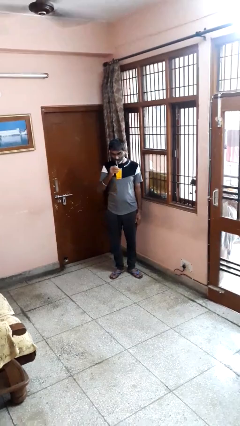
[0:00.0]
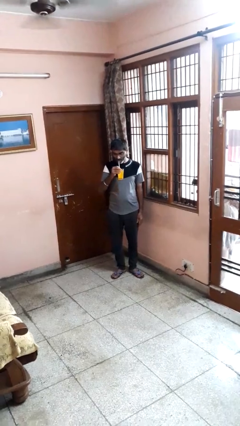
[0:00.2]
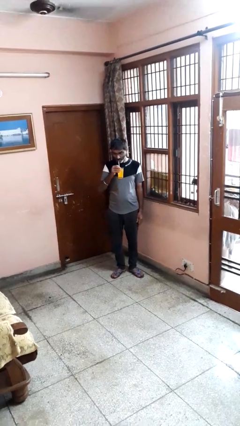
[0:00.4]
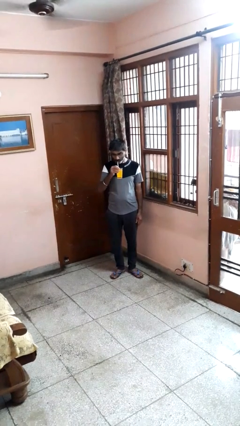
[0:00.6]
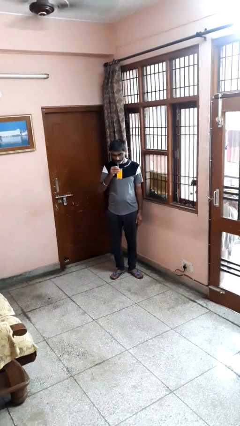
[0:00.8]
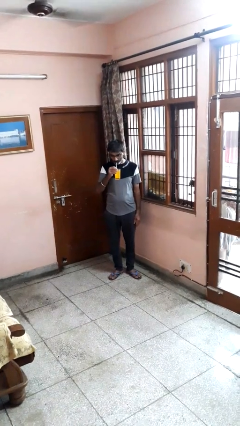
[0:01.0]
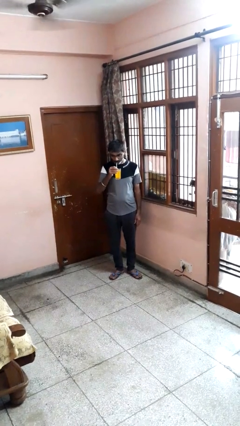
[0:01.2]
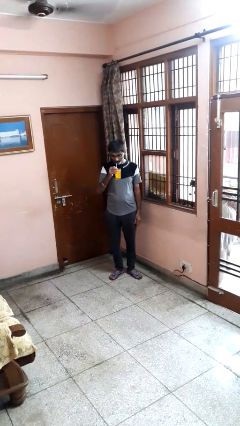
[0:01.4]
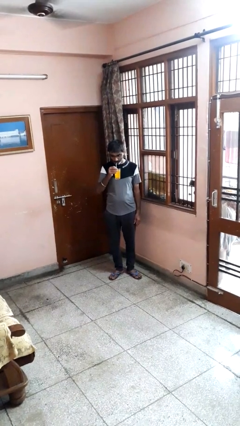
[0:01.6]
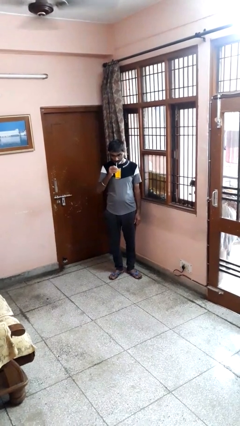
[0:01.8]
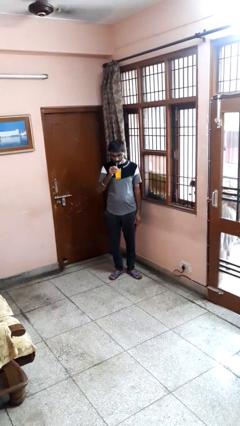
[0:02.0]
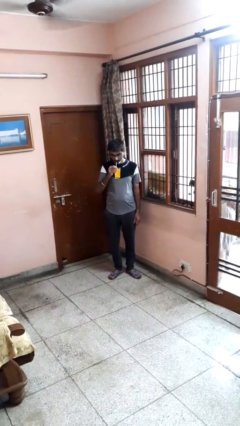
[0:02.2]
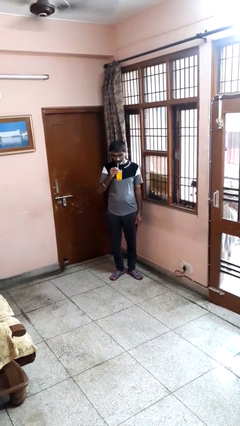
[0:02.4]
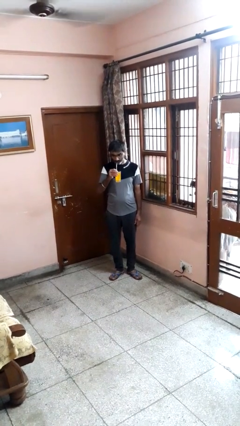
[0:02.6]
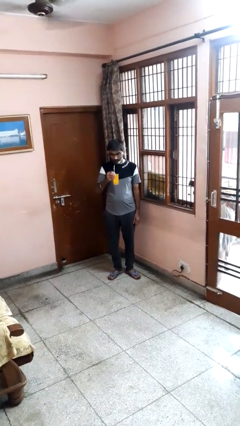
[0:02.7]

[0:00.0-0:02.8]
person drinks from straw

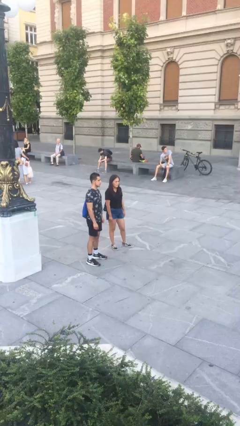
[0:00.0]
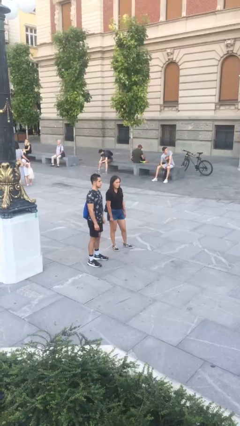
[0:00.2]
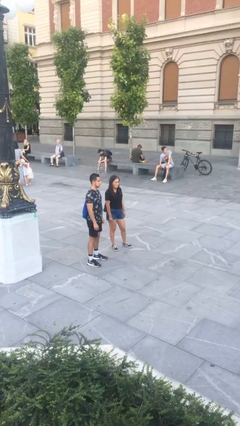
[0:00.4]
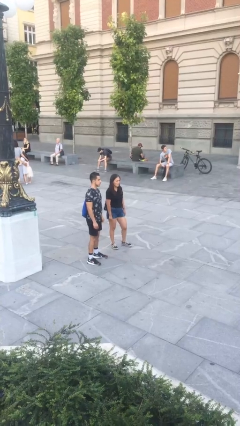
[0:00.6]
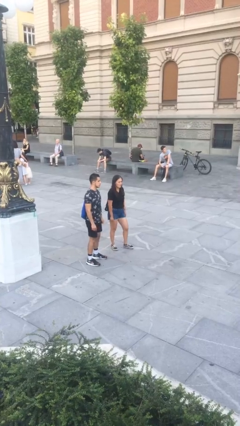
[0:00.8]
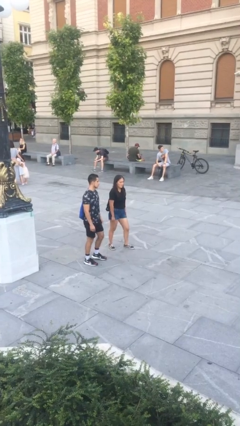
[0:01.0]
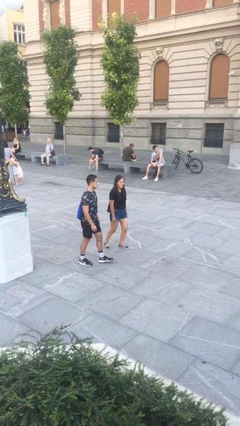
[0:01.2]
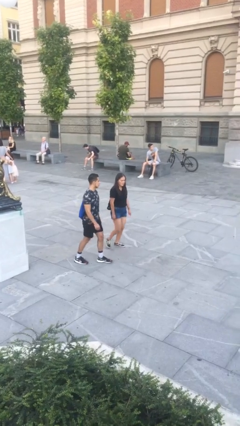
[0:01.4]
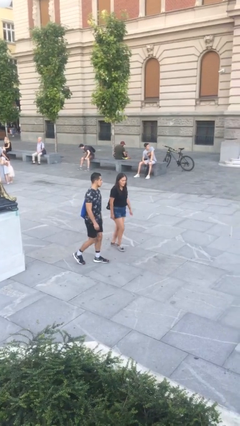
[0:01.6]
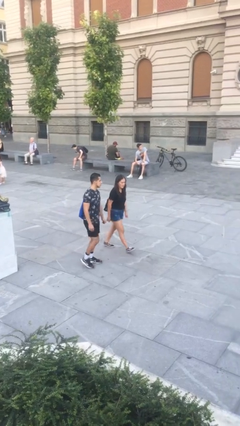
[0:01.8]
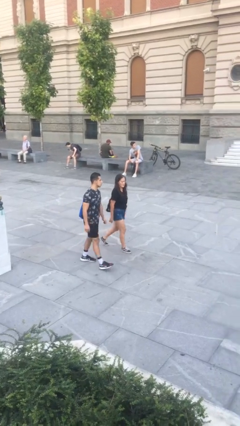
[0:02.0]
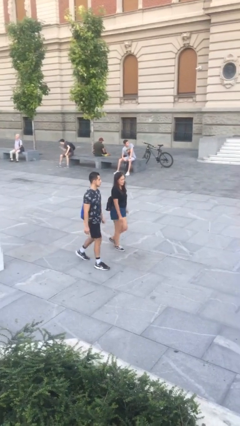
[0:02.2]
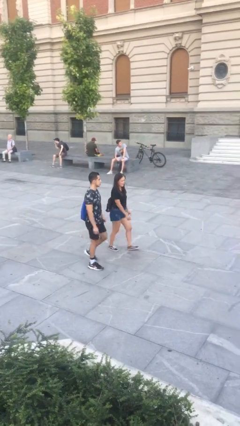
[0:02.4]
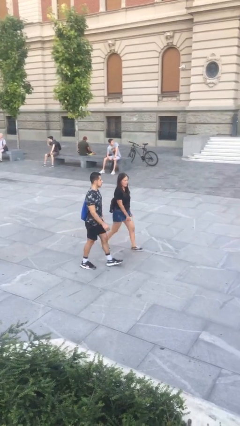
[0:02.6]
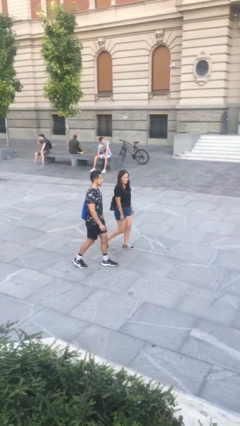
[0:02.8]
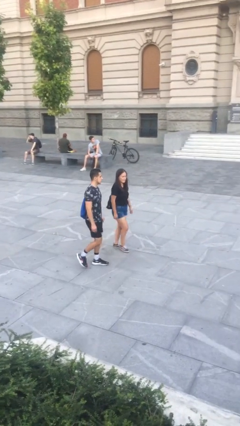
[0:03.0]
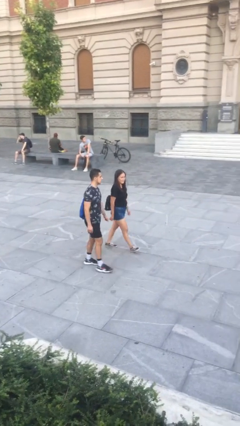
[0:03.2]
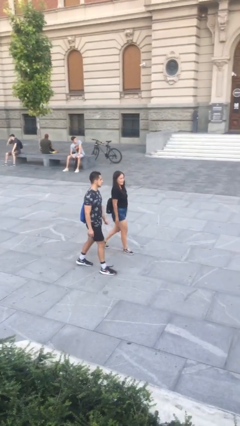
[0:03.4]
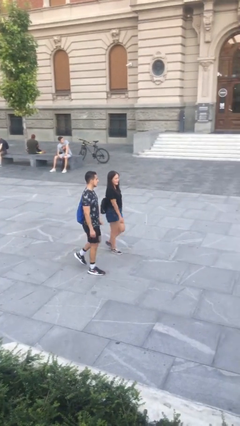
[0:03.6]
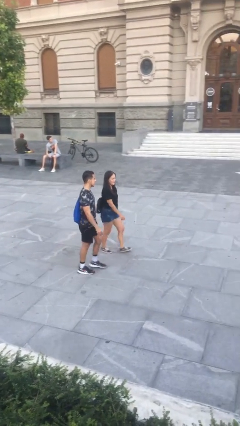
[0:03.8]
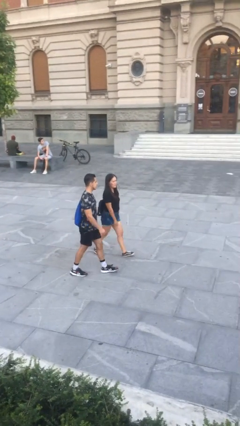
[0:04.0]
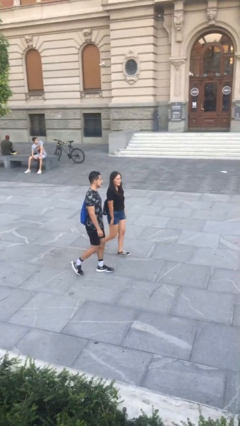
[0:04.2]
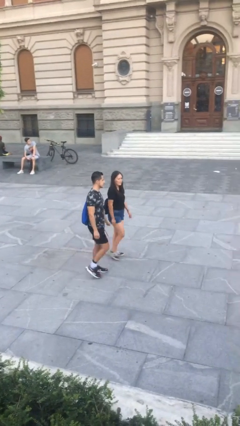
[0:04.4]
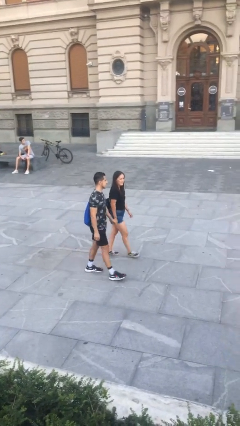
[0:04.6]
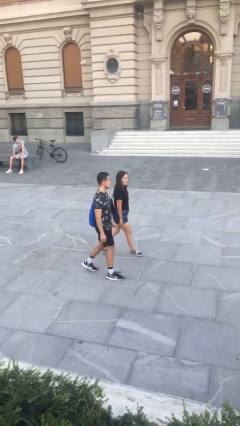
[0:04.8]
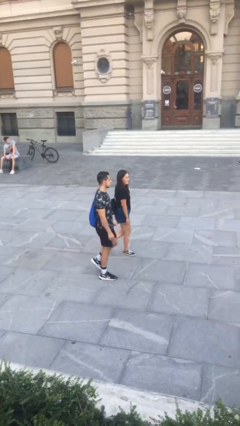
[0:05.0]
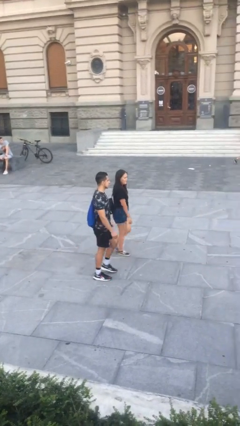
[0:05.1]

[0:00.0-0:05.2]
person talks to person

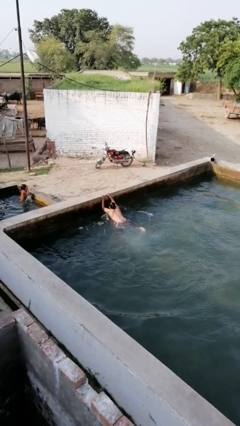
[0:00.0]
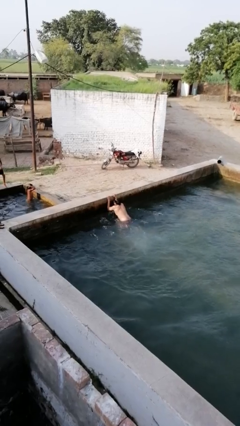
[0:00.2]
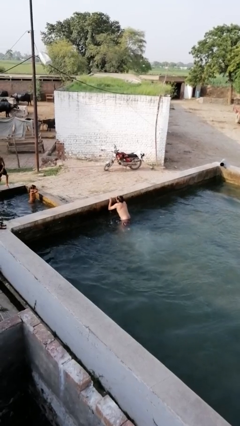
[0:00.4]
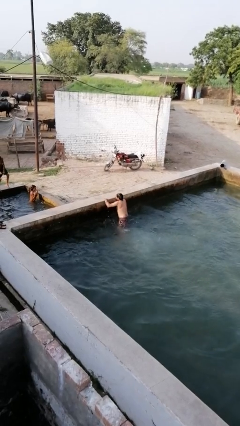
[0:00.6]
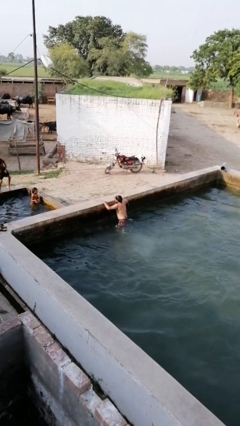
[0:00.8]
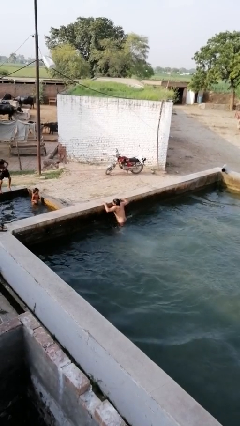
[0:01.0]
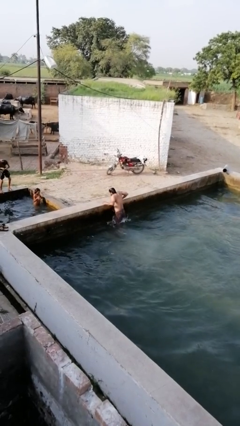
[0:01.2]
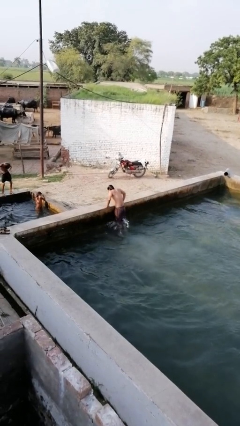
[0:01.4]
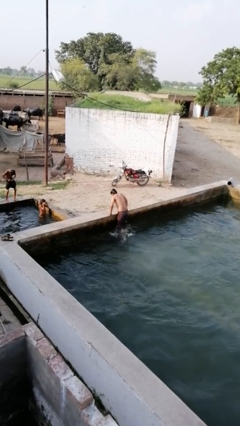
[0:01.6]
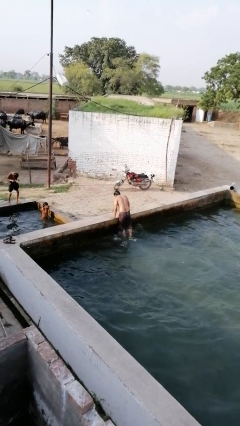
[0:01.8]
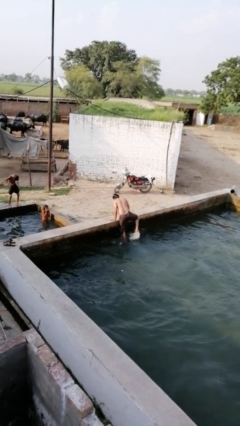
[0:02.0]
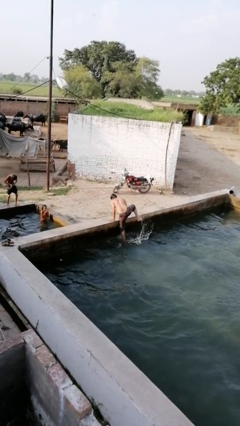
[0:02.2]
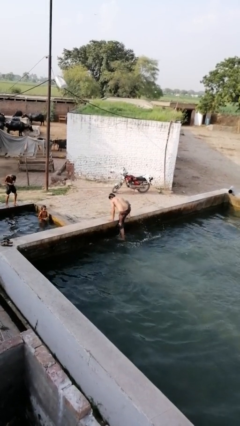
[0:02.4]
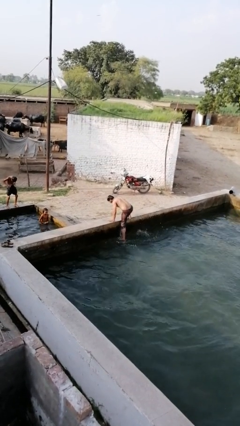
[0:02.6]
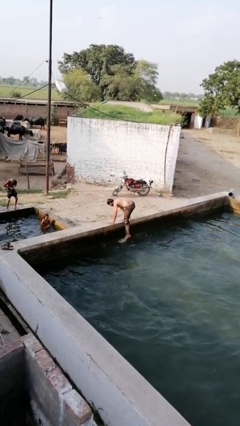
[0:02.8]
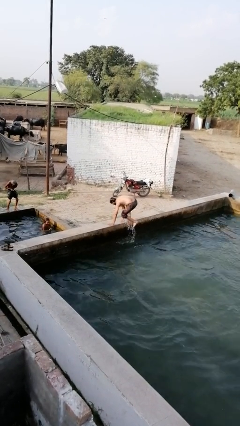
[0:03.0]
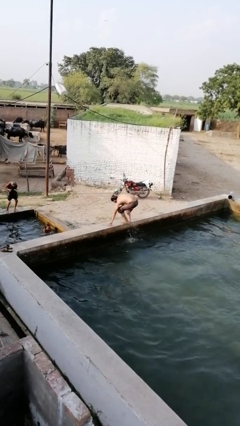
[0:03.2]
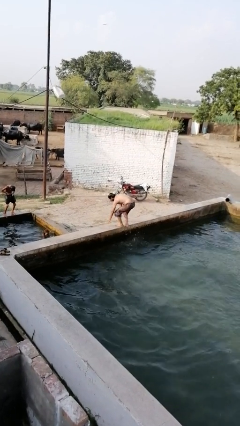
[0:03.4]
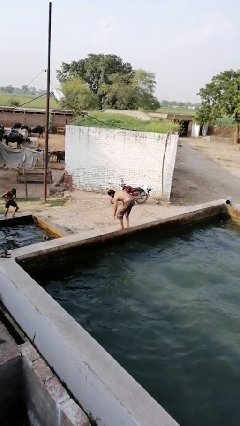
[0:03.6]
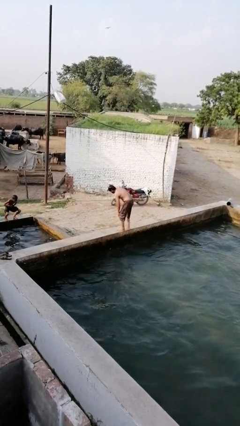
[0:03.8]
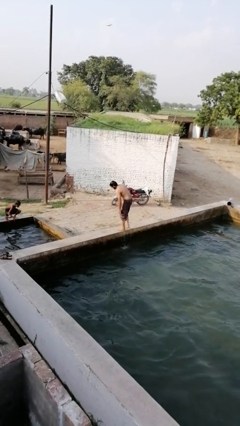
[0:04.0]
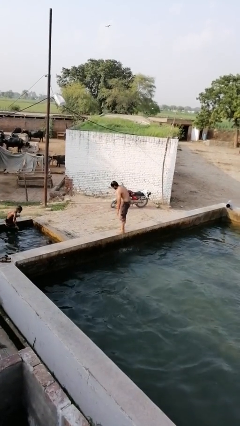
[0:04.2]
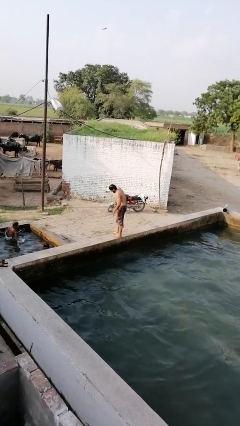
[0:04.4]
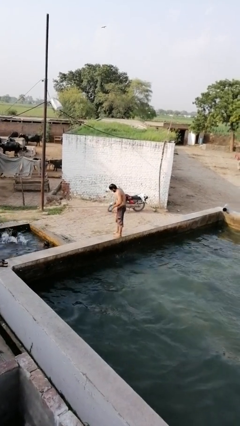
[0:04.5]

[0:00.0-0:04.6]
person exits pool

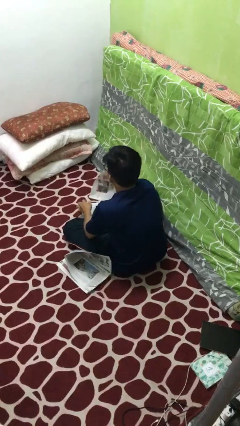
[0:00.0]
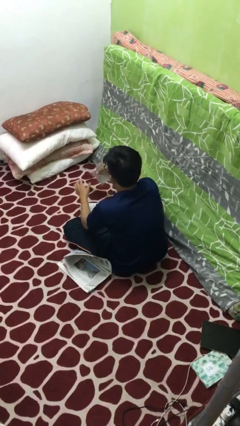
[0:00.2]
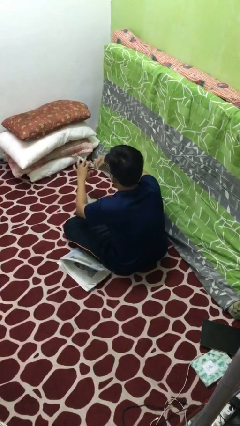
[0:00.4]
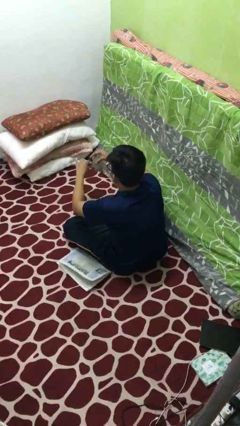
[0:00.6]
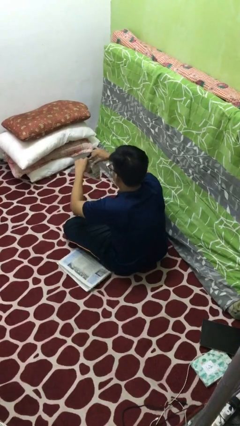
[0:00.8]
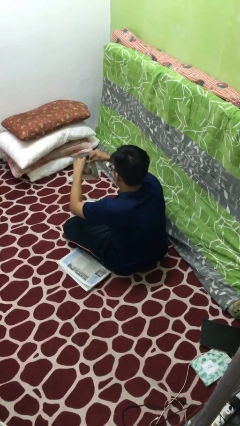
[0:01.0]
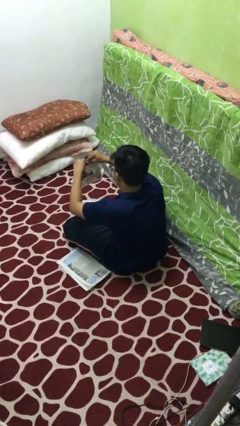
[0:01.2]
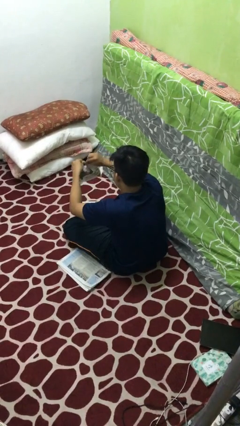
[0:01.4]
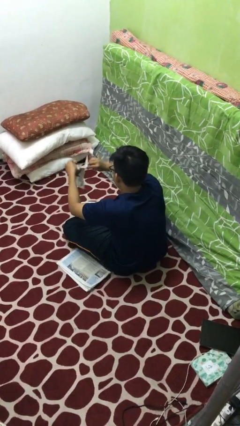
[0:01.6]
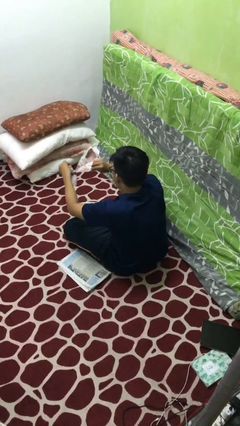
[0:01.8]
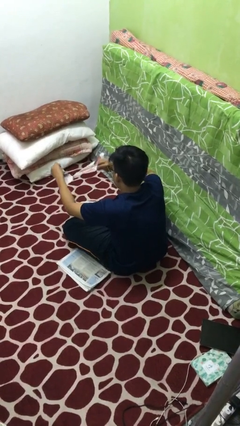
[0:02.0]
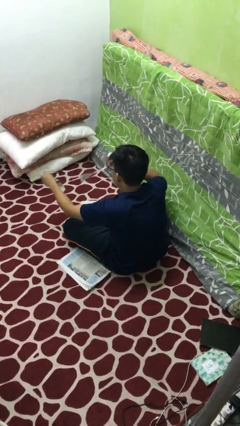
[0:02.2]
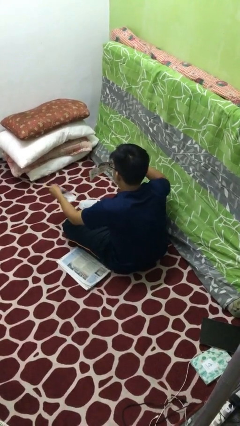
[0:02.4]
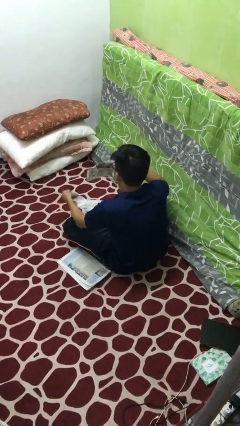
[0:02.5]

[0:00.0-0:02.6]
person tears paper

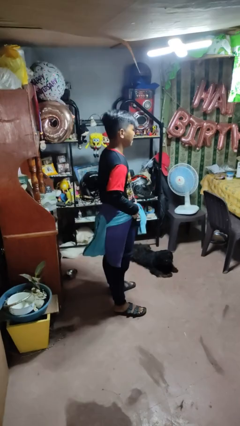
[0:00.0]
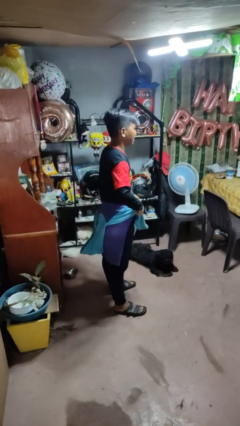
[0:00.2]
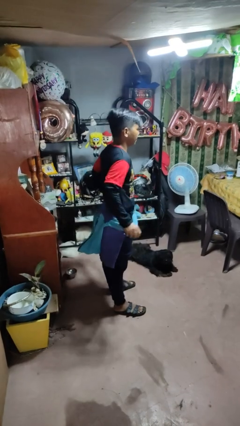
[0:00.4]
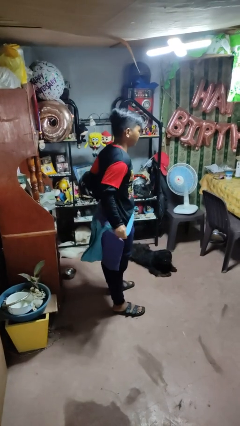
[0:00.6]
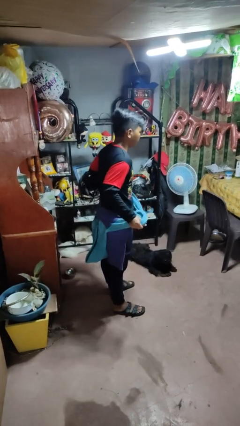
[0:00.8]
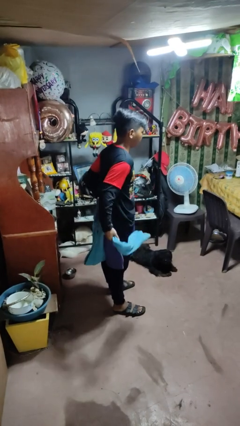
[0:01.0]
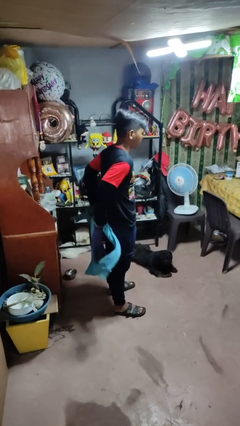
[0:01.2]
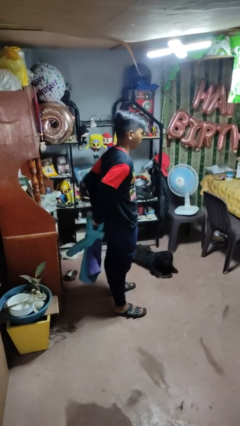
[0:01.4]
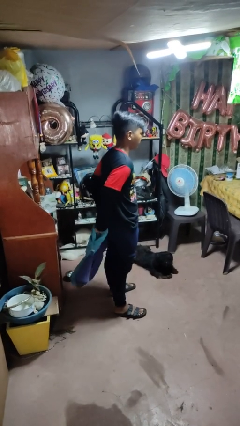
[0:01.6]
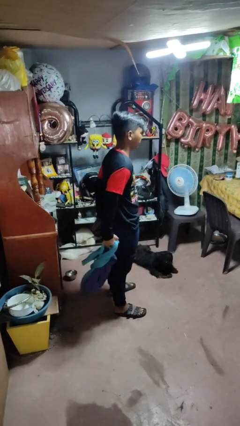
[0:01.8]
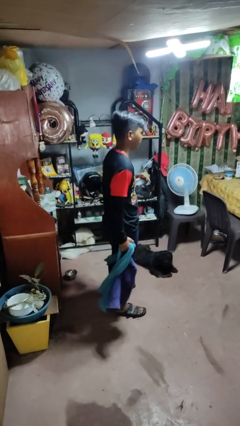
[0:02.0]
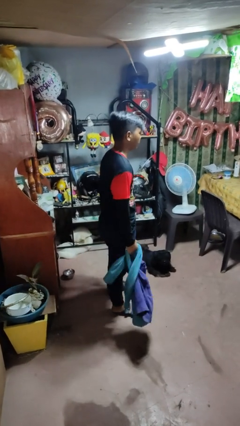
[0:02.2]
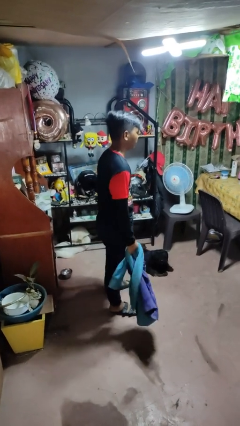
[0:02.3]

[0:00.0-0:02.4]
person unties jacket around waist

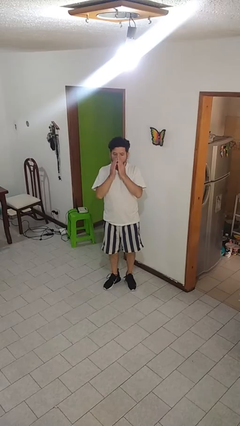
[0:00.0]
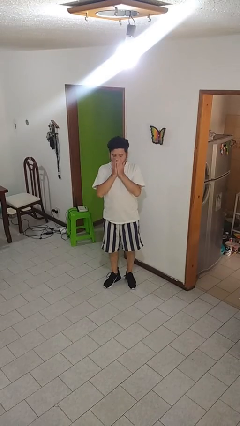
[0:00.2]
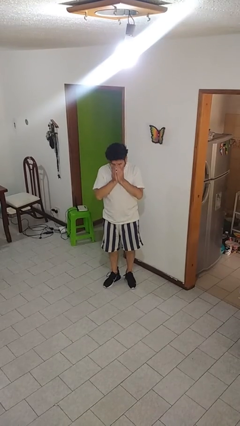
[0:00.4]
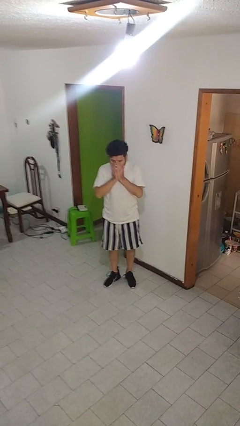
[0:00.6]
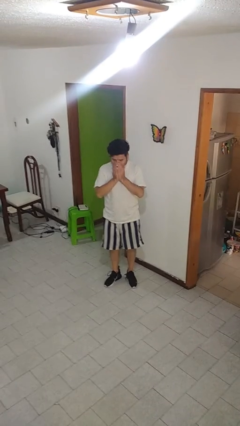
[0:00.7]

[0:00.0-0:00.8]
person sneezes into hand
